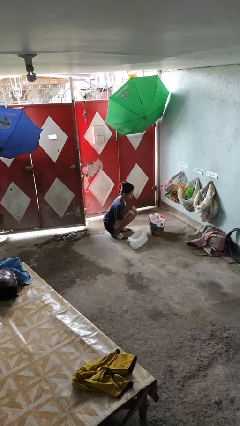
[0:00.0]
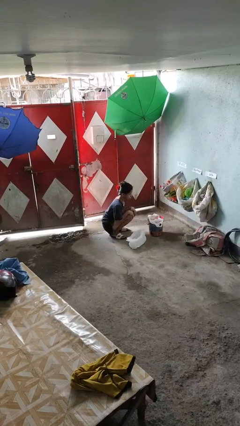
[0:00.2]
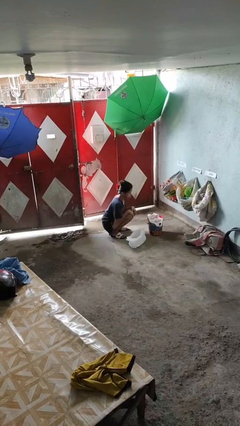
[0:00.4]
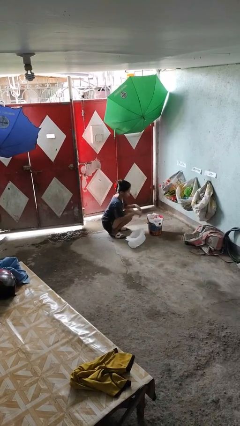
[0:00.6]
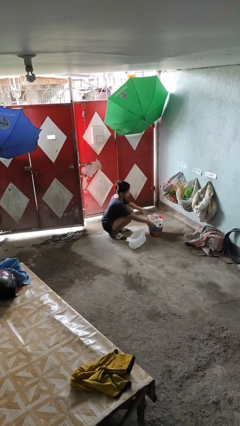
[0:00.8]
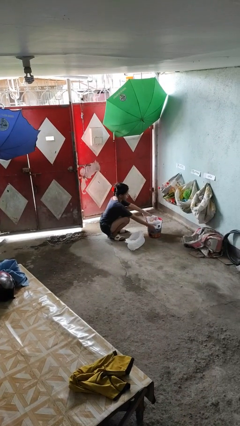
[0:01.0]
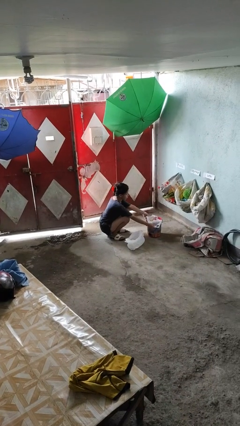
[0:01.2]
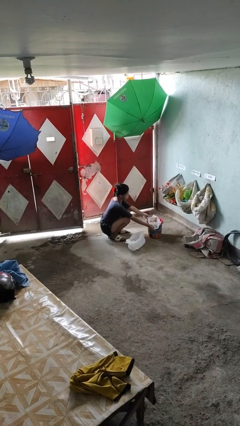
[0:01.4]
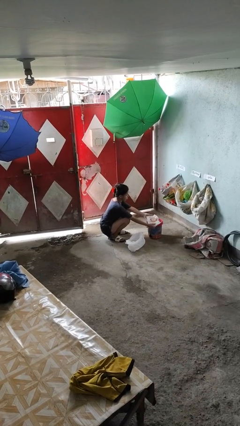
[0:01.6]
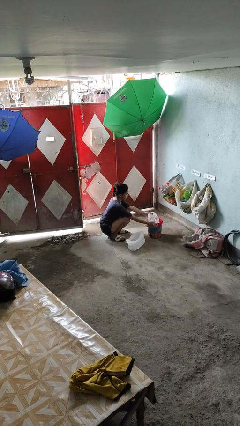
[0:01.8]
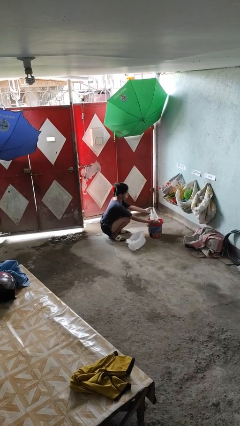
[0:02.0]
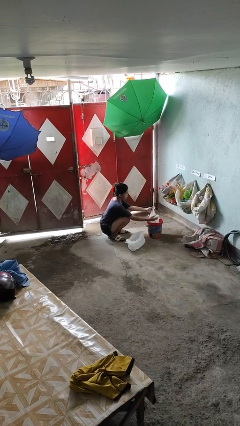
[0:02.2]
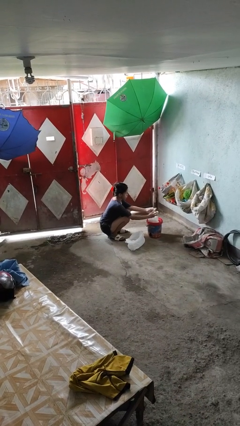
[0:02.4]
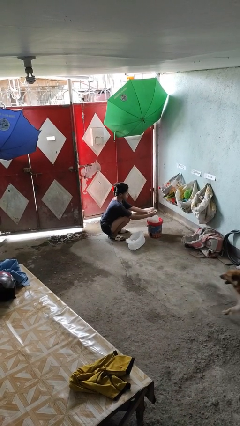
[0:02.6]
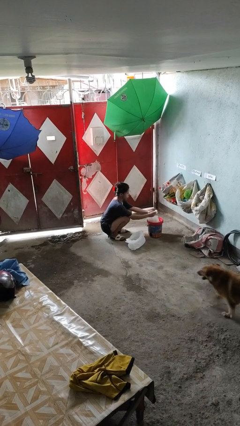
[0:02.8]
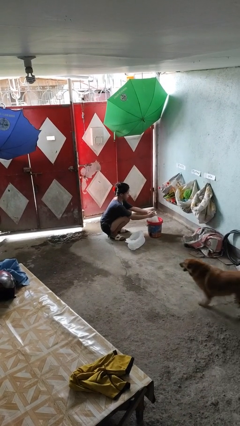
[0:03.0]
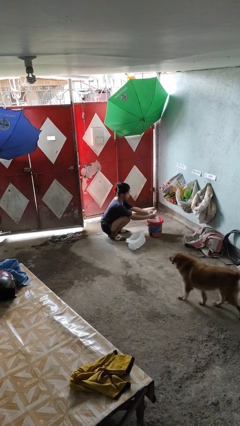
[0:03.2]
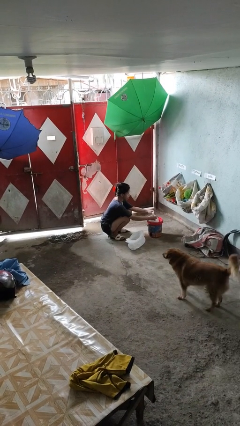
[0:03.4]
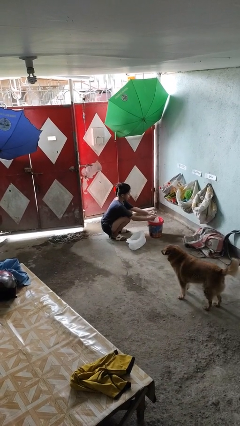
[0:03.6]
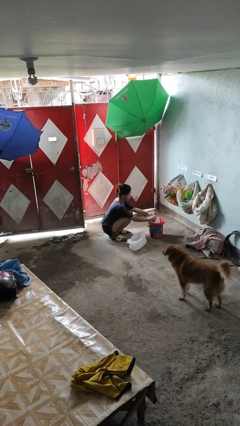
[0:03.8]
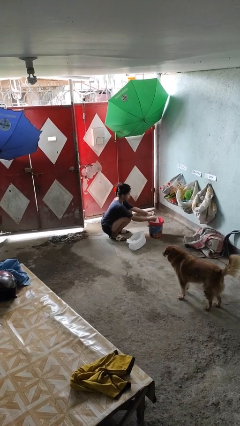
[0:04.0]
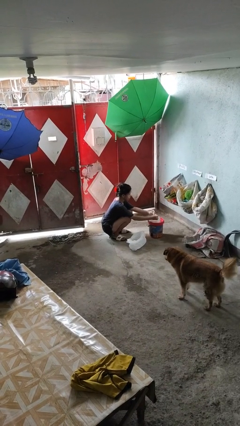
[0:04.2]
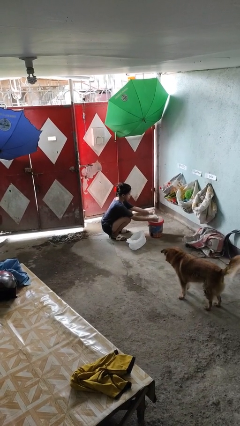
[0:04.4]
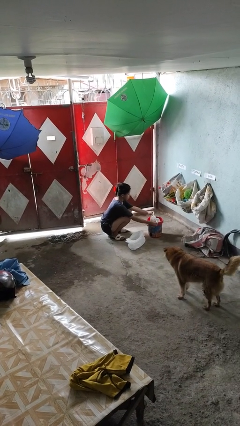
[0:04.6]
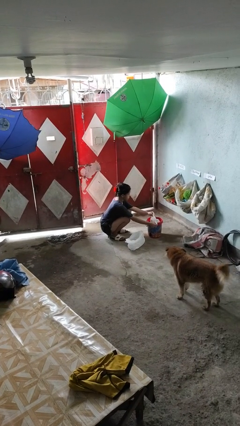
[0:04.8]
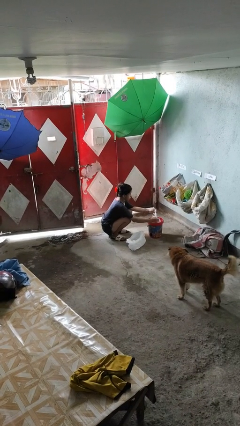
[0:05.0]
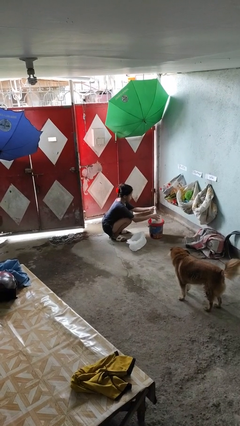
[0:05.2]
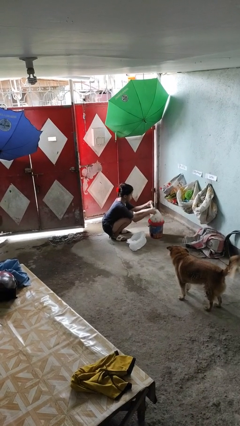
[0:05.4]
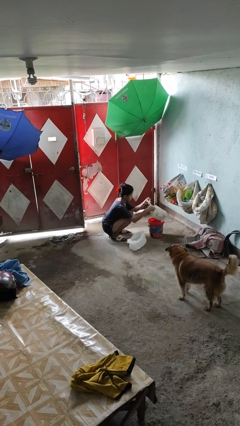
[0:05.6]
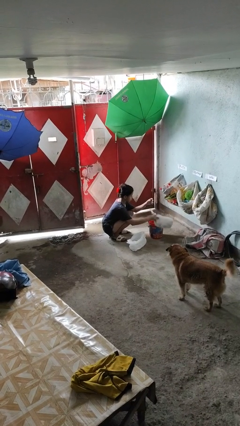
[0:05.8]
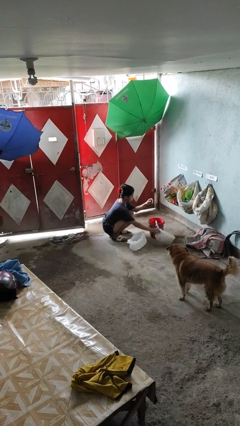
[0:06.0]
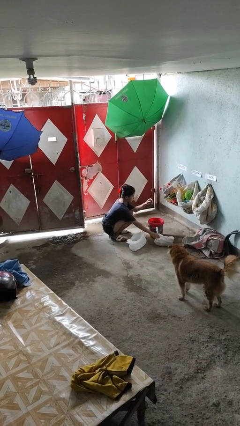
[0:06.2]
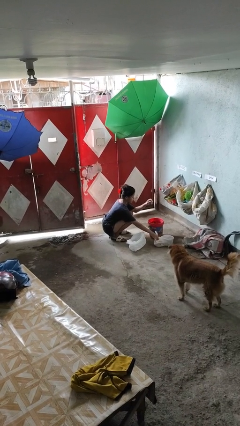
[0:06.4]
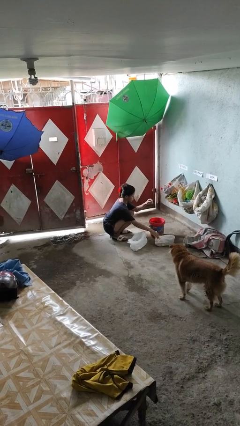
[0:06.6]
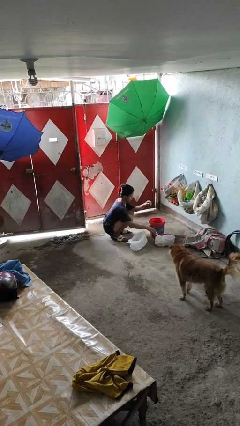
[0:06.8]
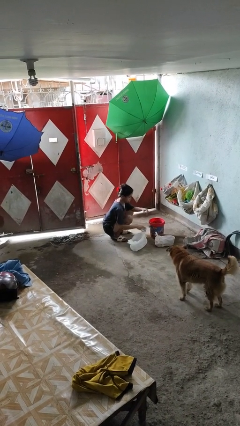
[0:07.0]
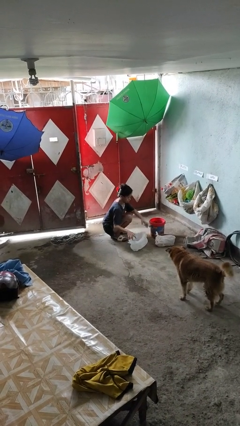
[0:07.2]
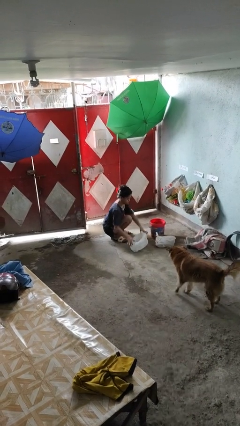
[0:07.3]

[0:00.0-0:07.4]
person removes trashbag from trashcan

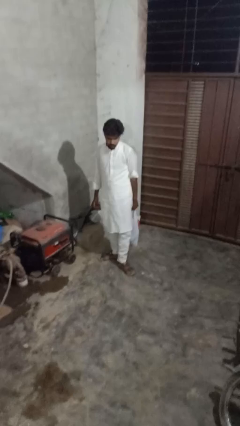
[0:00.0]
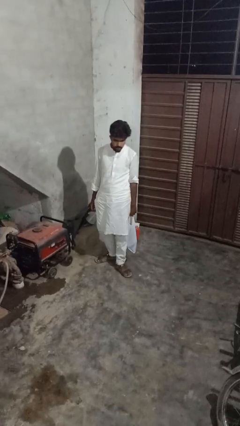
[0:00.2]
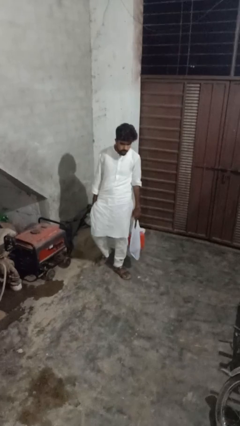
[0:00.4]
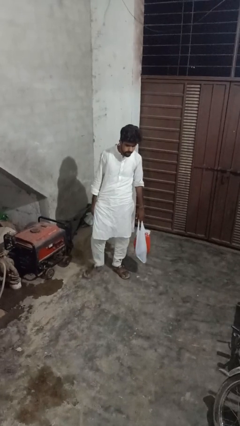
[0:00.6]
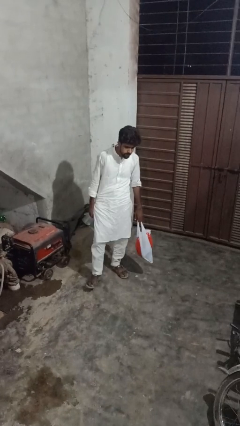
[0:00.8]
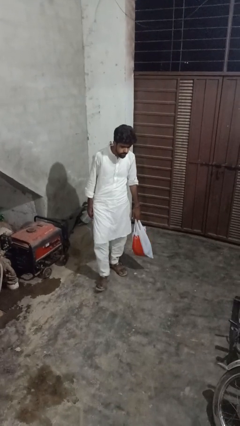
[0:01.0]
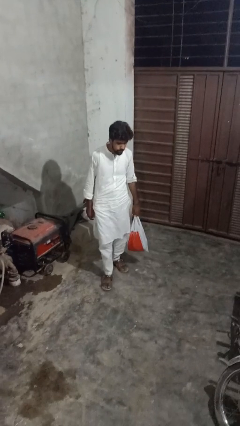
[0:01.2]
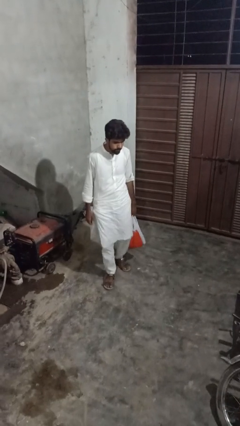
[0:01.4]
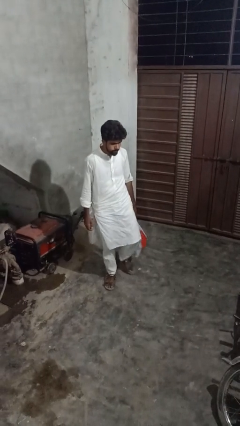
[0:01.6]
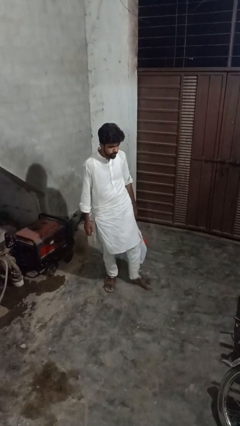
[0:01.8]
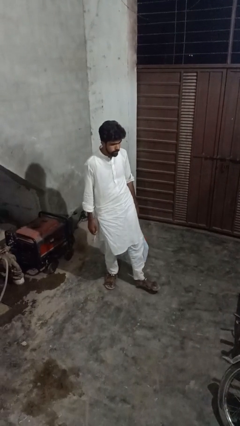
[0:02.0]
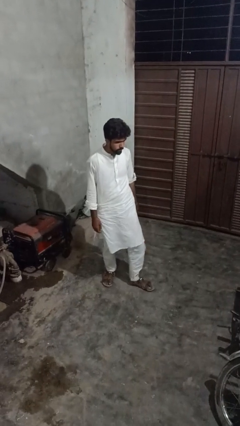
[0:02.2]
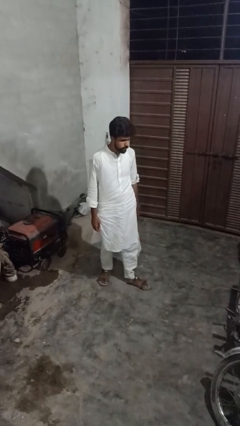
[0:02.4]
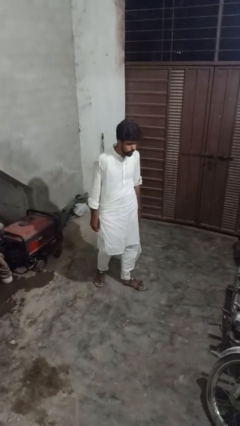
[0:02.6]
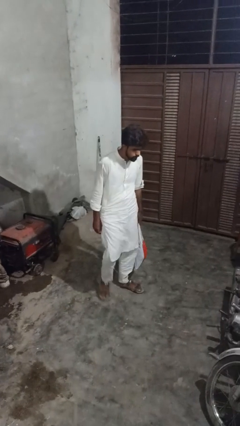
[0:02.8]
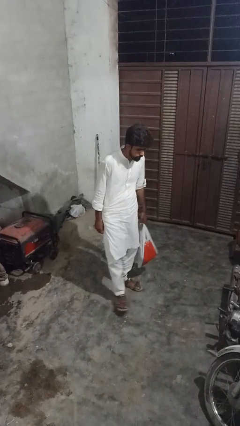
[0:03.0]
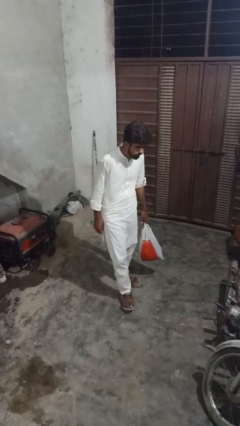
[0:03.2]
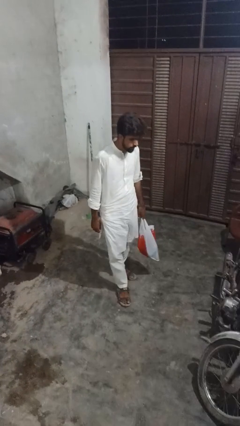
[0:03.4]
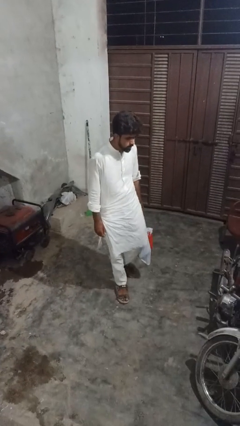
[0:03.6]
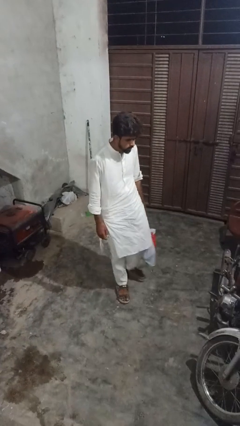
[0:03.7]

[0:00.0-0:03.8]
person carries groceries

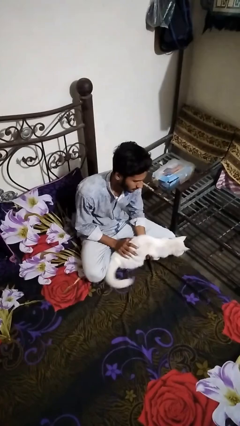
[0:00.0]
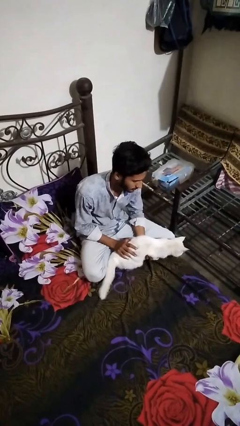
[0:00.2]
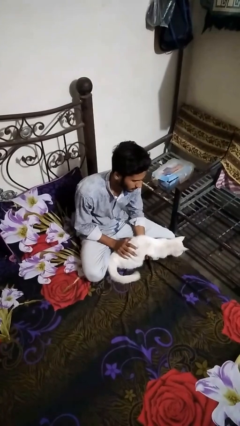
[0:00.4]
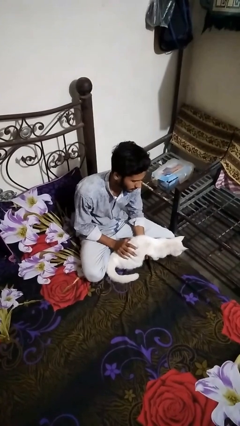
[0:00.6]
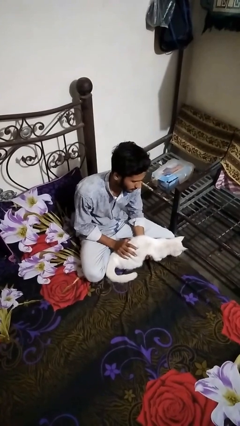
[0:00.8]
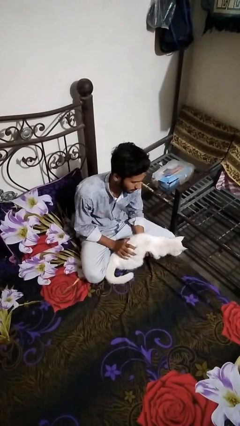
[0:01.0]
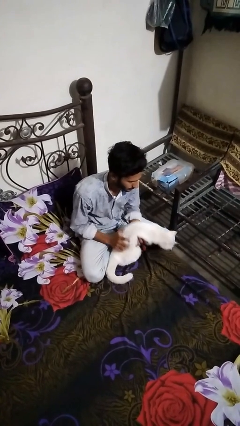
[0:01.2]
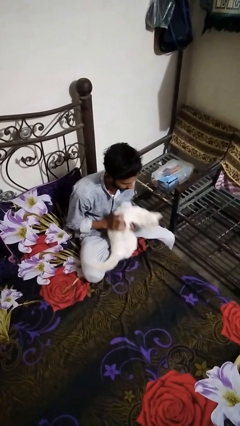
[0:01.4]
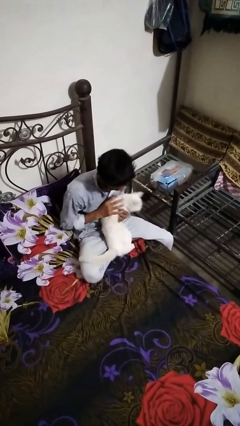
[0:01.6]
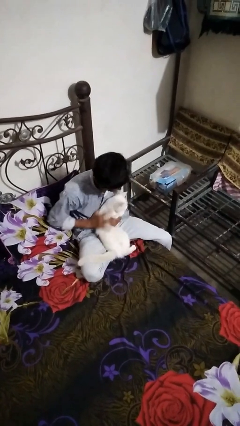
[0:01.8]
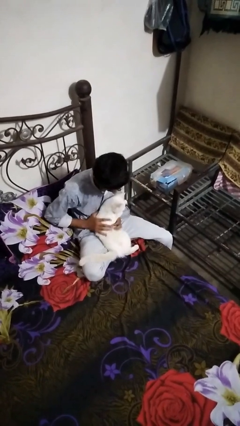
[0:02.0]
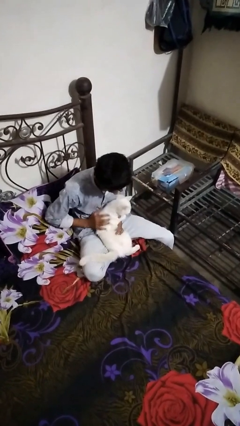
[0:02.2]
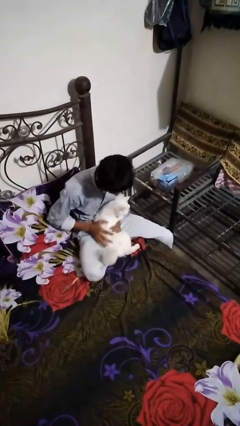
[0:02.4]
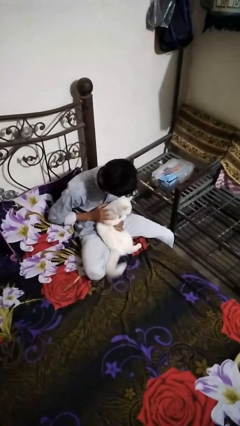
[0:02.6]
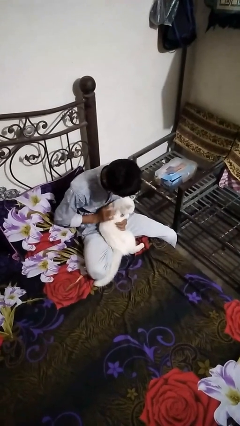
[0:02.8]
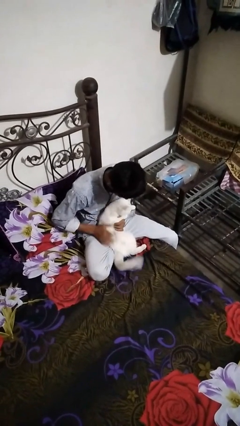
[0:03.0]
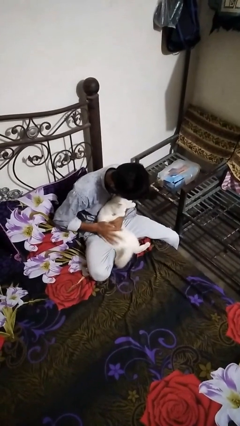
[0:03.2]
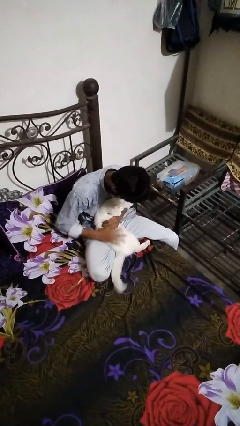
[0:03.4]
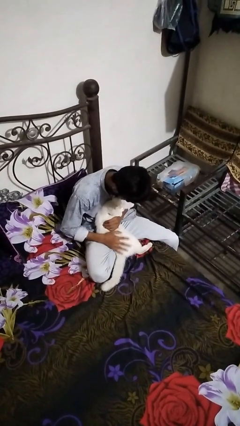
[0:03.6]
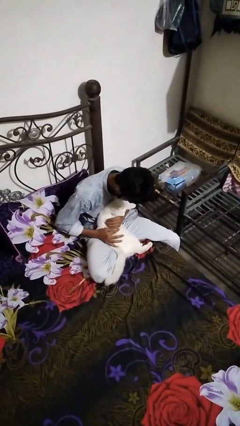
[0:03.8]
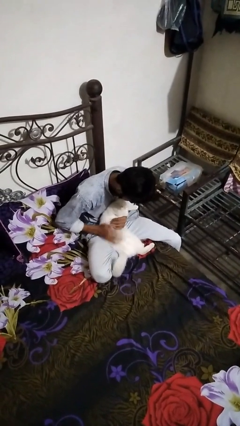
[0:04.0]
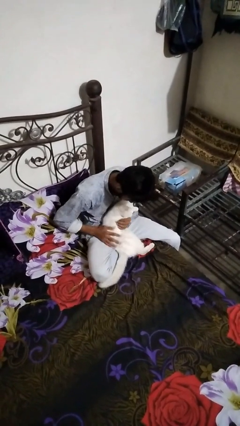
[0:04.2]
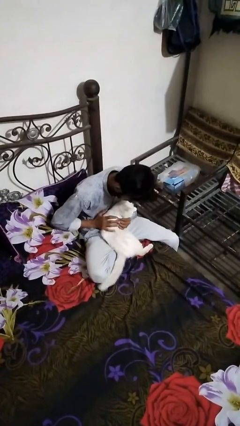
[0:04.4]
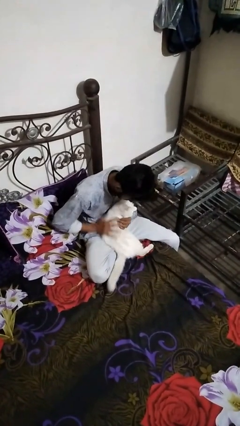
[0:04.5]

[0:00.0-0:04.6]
person pets cat

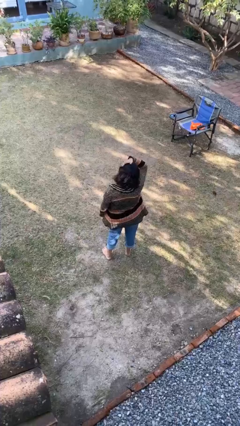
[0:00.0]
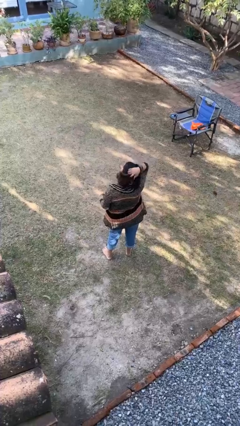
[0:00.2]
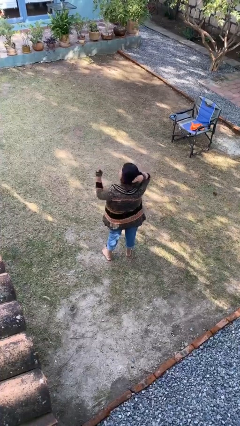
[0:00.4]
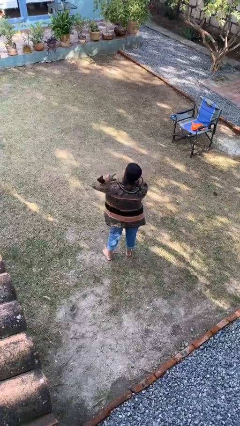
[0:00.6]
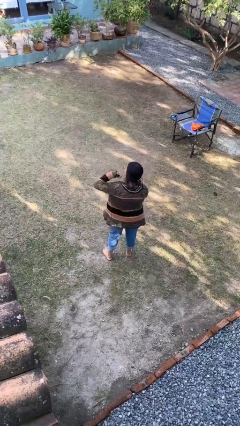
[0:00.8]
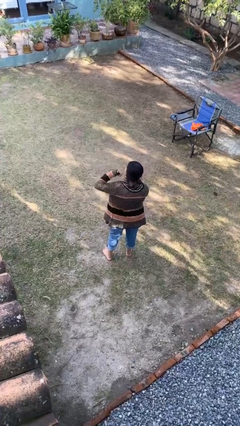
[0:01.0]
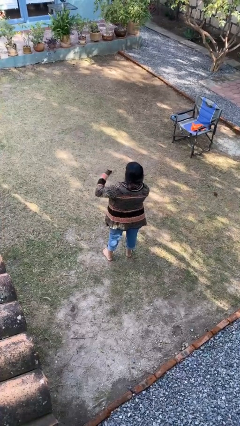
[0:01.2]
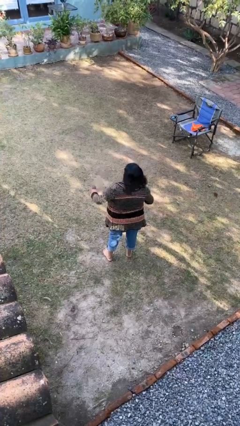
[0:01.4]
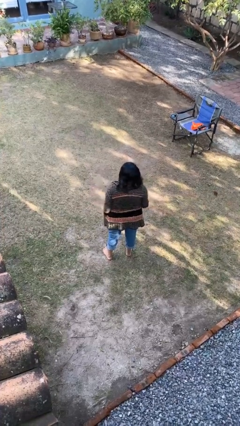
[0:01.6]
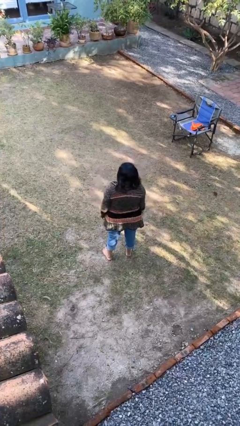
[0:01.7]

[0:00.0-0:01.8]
person gestures call me
